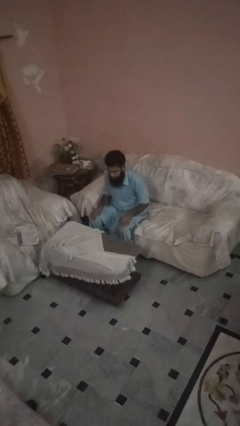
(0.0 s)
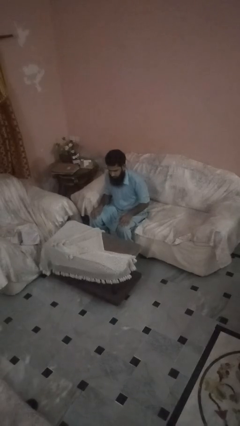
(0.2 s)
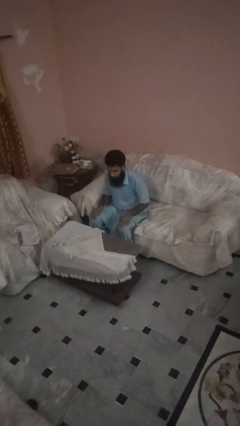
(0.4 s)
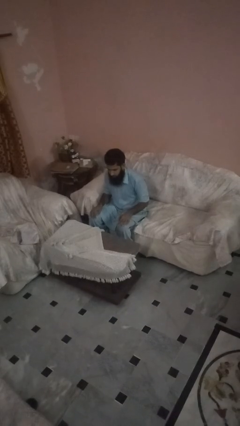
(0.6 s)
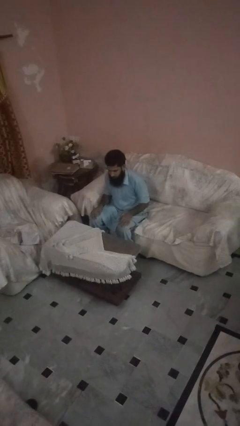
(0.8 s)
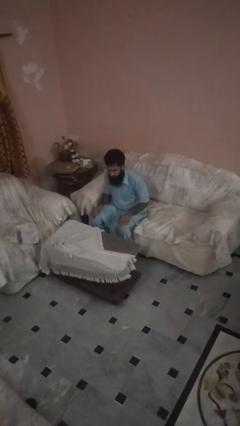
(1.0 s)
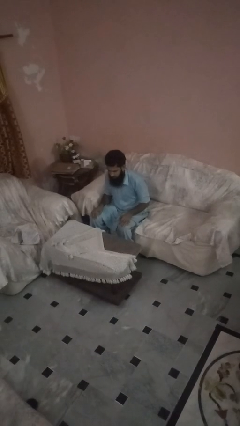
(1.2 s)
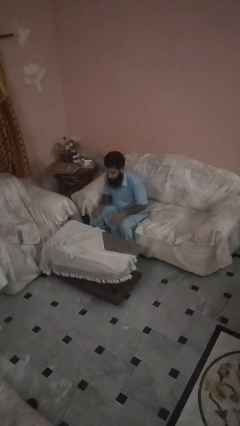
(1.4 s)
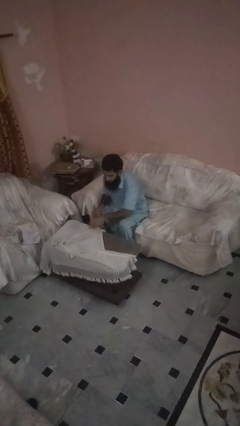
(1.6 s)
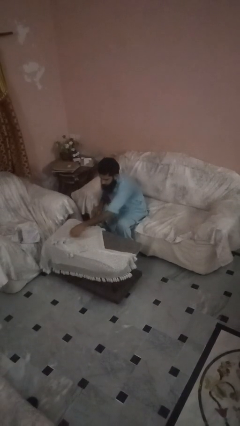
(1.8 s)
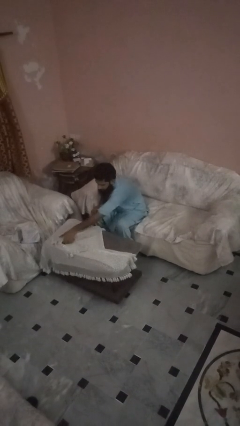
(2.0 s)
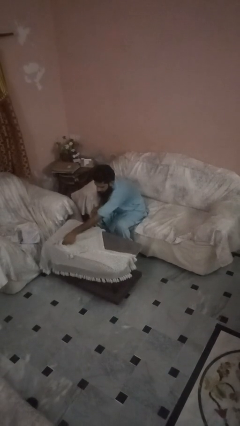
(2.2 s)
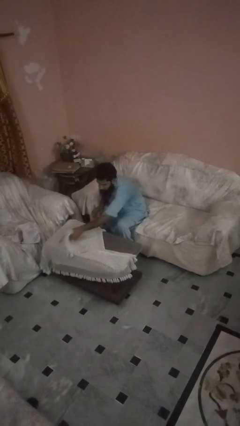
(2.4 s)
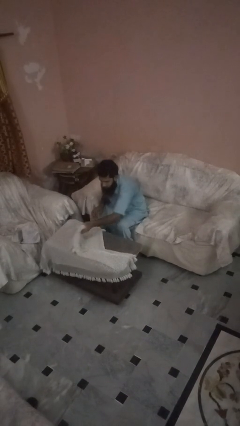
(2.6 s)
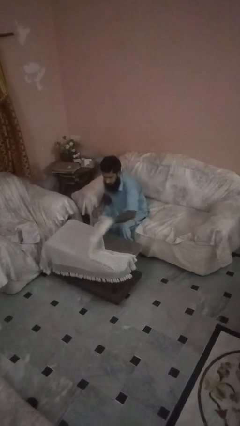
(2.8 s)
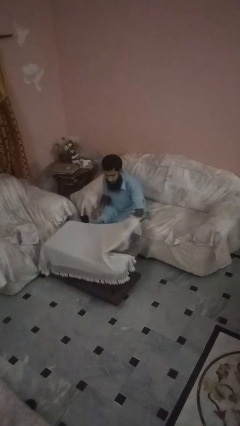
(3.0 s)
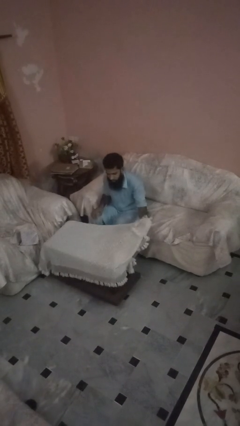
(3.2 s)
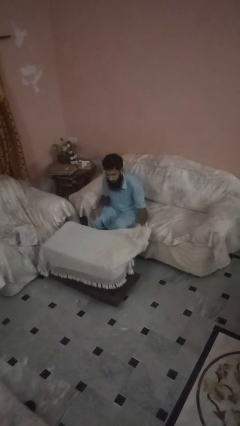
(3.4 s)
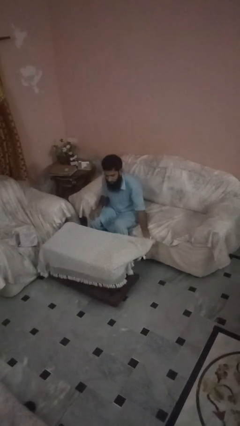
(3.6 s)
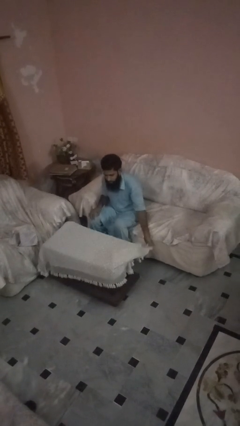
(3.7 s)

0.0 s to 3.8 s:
person spreads tablecloth

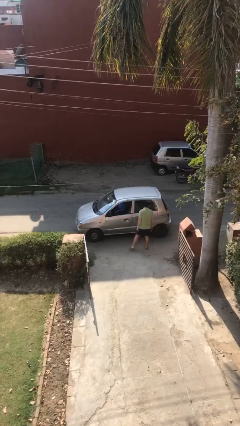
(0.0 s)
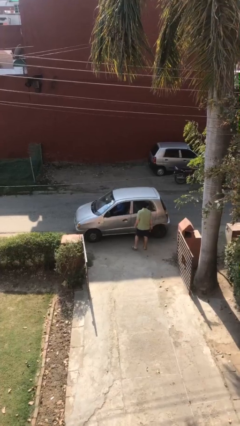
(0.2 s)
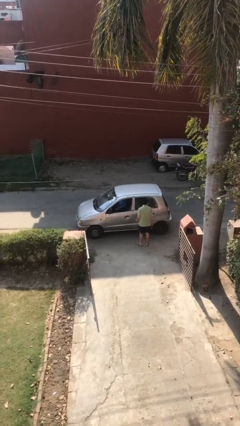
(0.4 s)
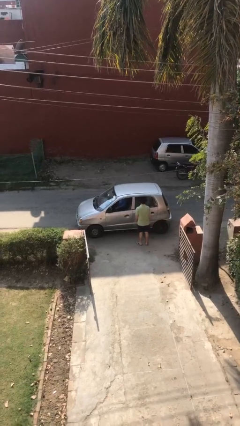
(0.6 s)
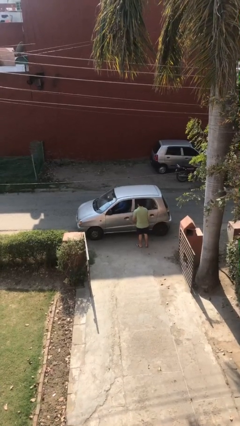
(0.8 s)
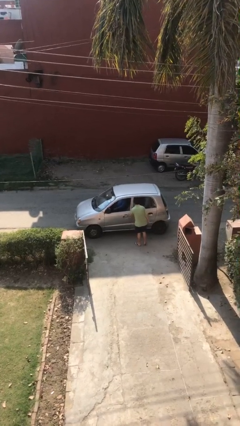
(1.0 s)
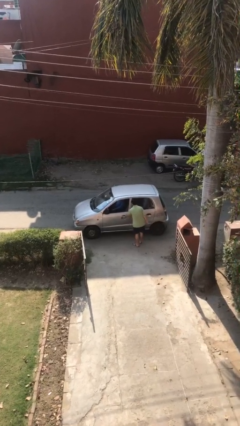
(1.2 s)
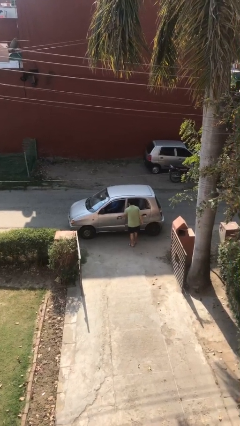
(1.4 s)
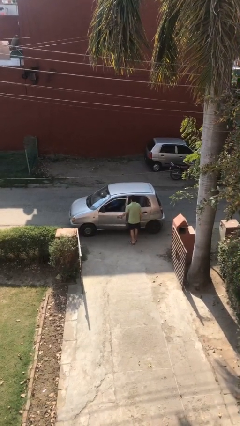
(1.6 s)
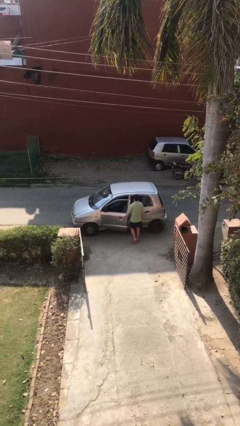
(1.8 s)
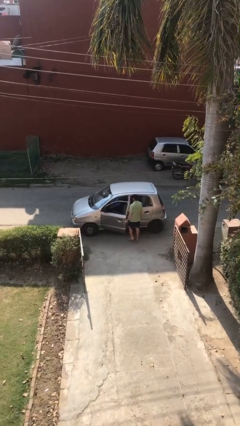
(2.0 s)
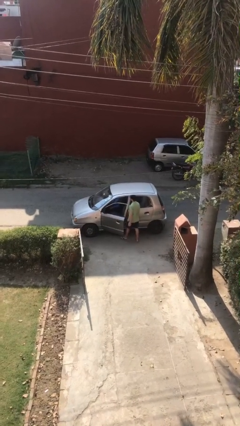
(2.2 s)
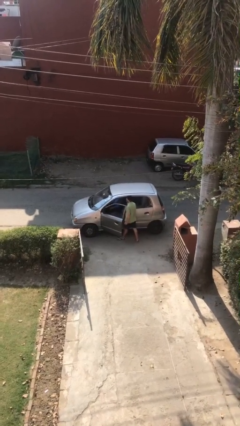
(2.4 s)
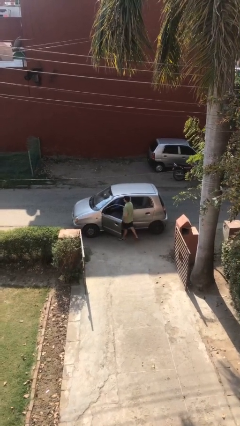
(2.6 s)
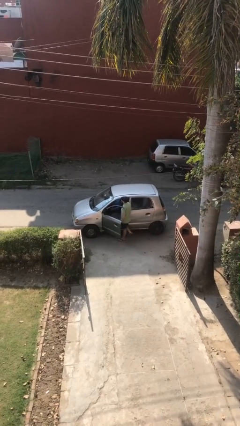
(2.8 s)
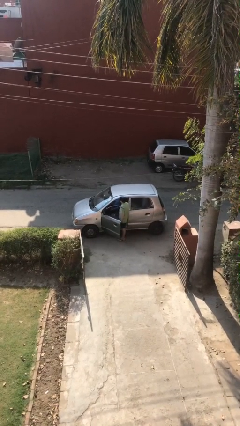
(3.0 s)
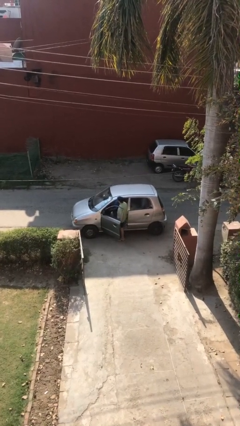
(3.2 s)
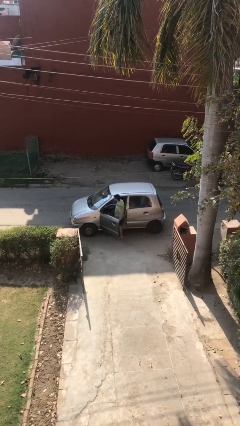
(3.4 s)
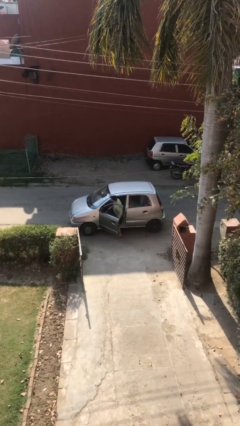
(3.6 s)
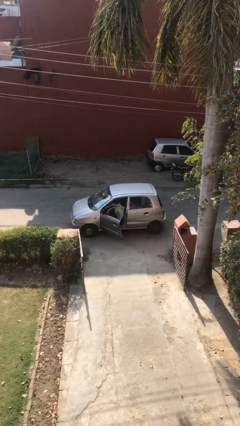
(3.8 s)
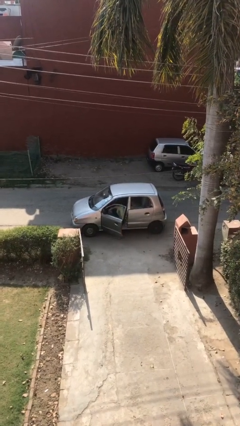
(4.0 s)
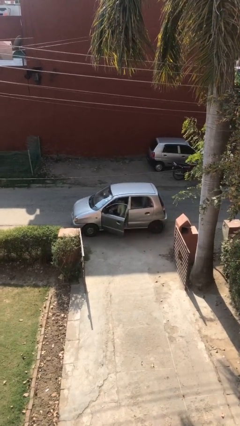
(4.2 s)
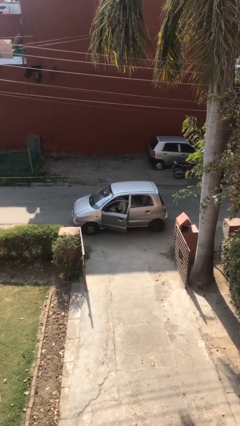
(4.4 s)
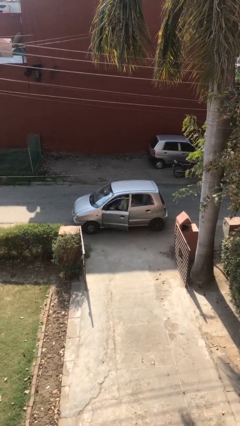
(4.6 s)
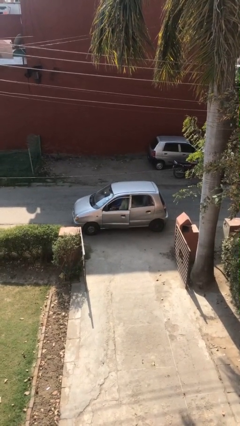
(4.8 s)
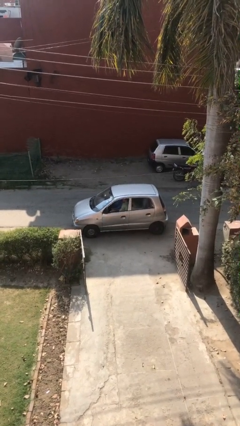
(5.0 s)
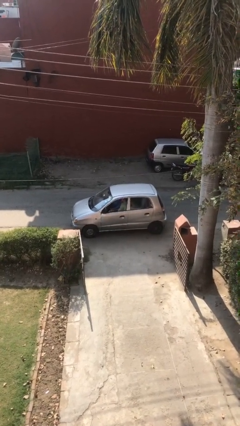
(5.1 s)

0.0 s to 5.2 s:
car picks up person

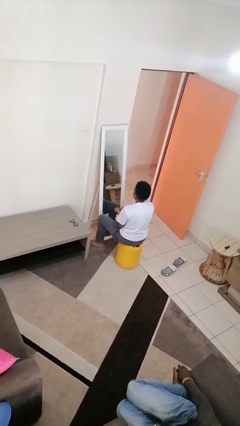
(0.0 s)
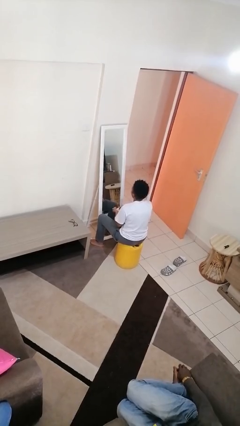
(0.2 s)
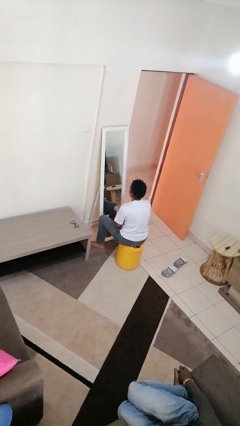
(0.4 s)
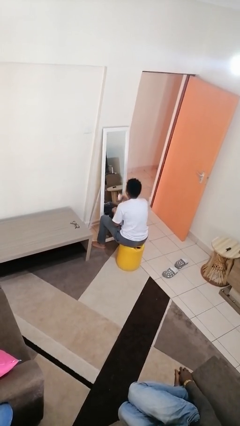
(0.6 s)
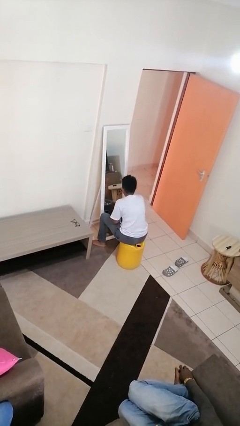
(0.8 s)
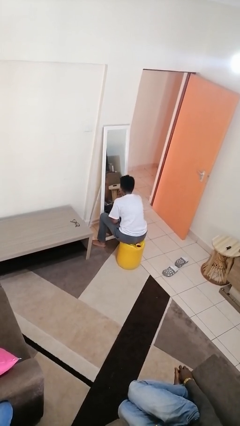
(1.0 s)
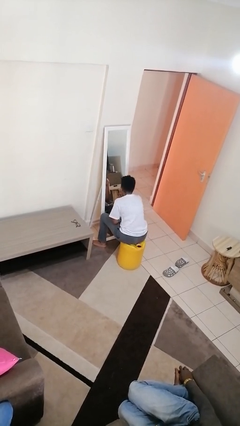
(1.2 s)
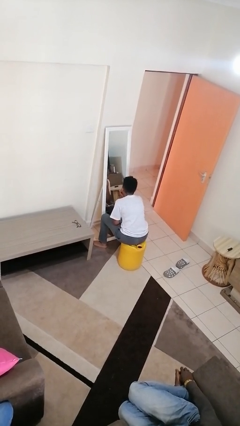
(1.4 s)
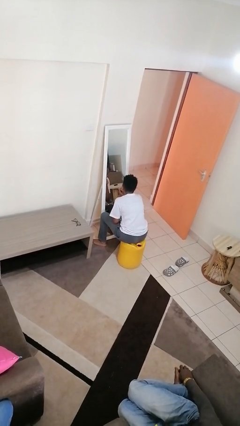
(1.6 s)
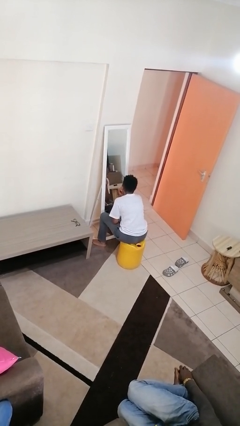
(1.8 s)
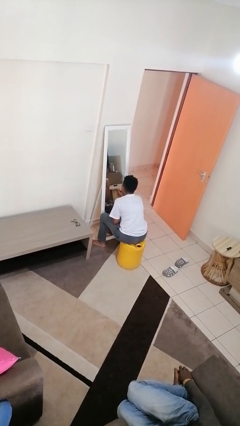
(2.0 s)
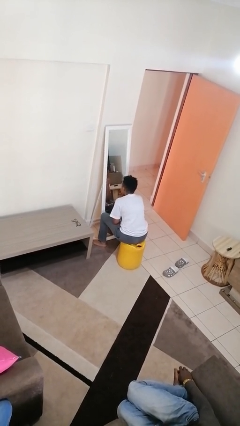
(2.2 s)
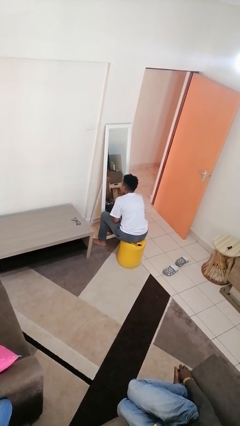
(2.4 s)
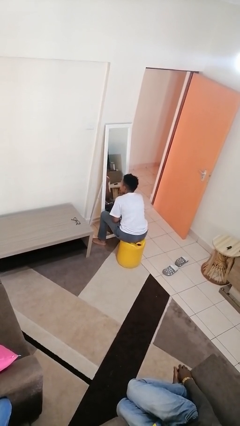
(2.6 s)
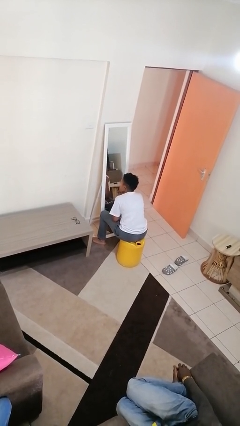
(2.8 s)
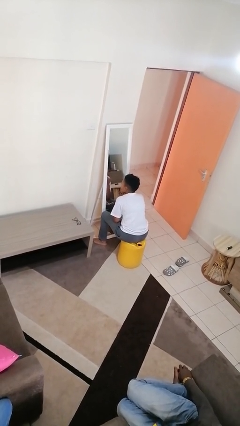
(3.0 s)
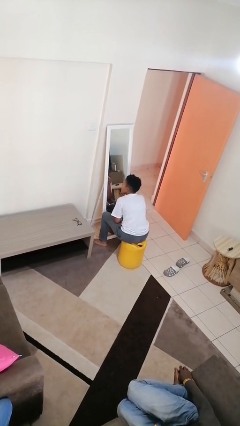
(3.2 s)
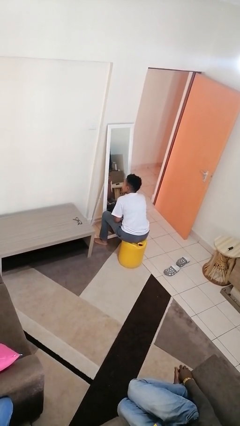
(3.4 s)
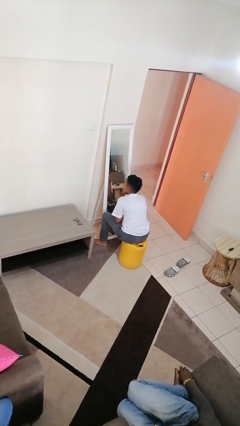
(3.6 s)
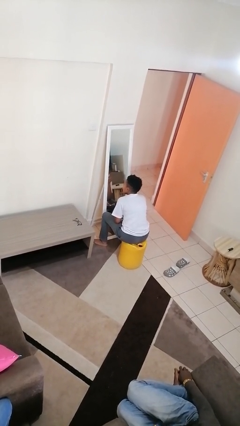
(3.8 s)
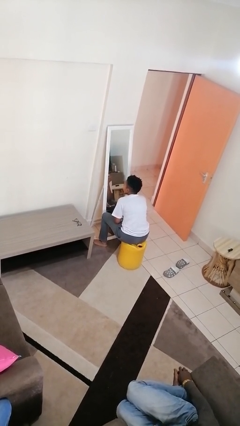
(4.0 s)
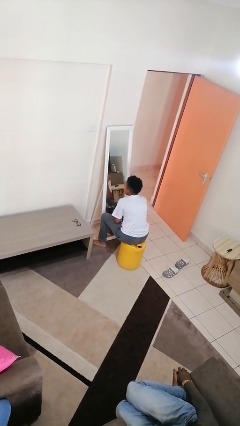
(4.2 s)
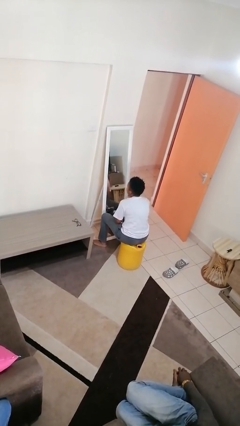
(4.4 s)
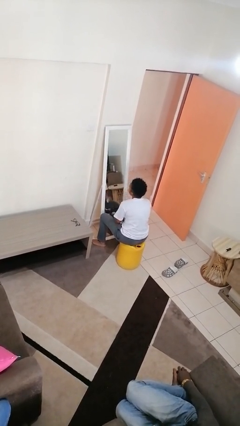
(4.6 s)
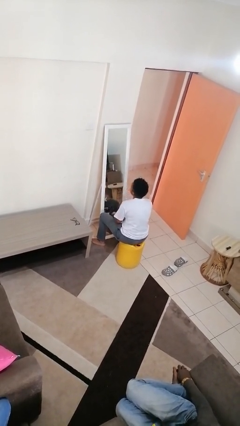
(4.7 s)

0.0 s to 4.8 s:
person applies foundation makeup

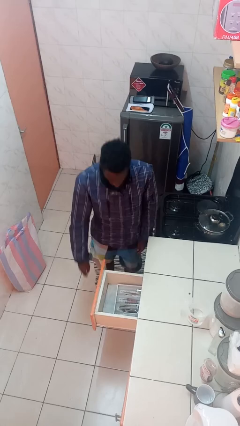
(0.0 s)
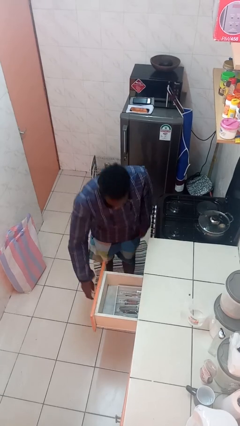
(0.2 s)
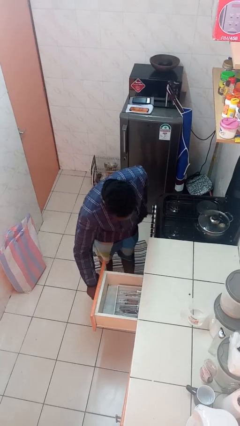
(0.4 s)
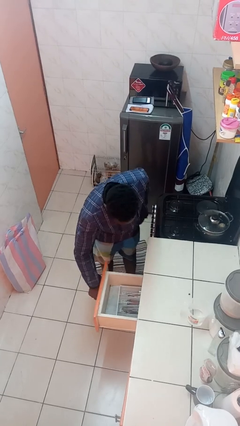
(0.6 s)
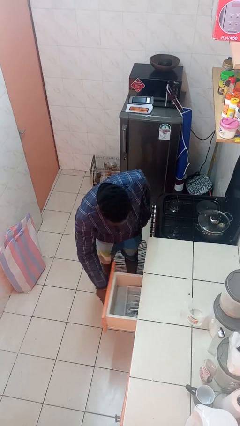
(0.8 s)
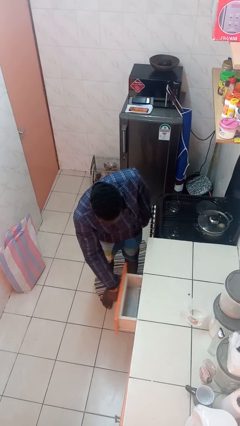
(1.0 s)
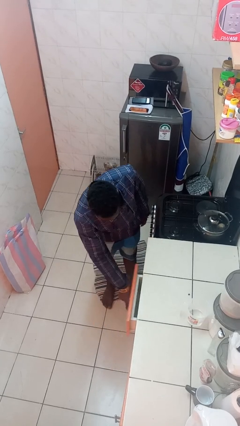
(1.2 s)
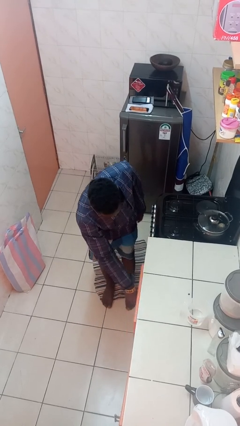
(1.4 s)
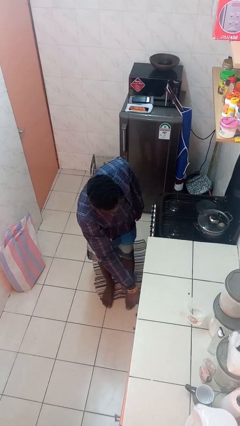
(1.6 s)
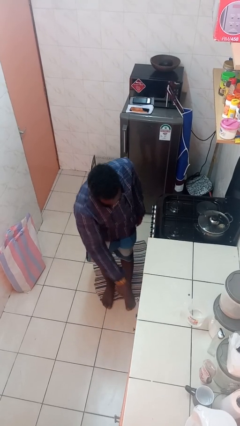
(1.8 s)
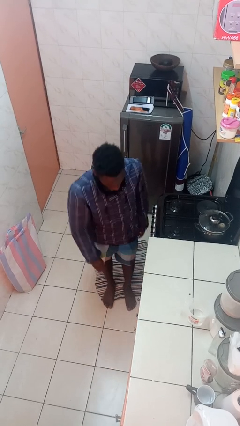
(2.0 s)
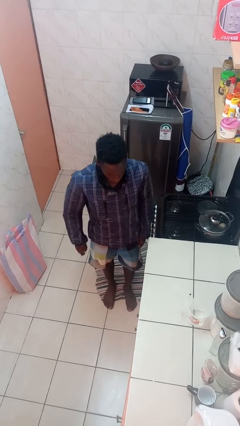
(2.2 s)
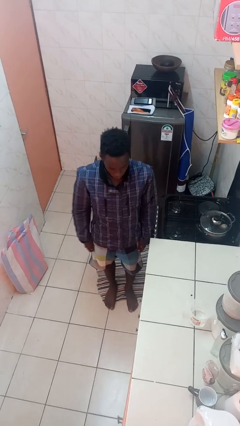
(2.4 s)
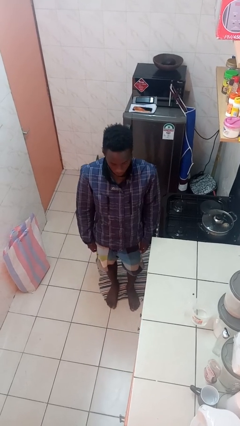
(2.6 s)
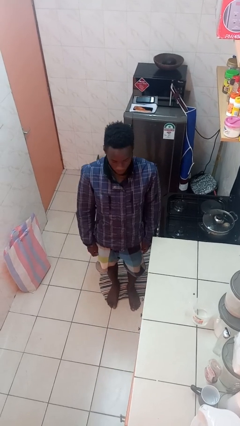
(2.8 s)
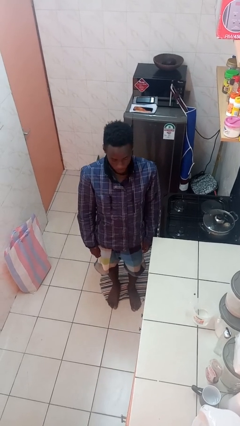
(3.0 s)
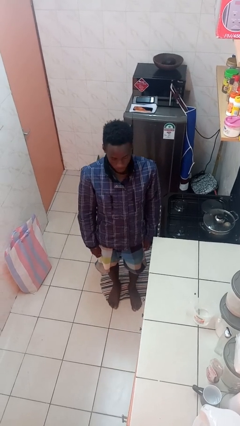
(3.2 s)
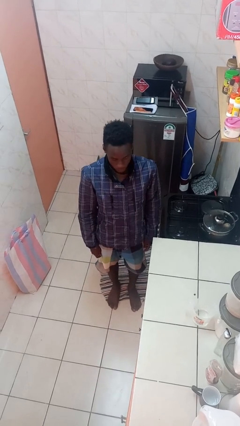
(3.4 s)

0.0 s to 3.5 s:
person closes kitchen drawer

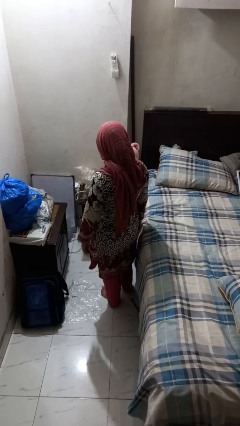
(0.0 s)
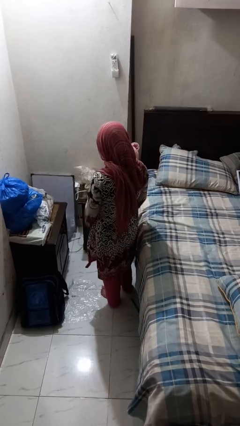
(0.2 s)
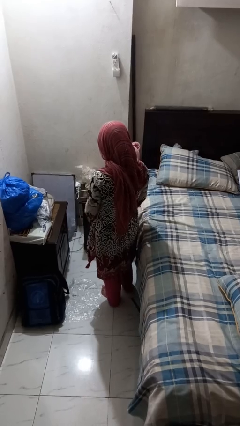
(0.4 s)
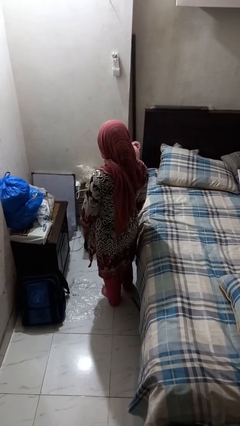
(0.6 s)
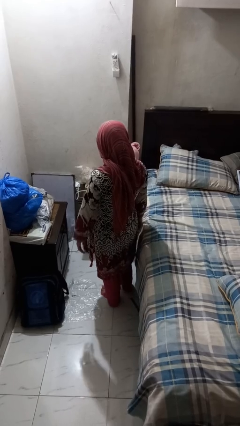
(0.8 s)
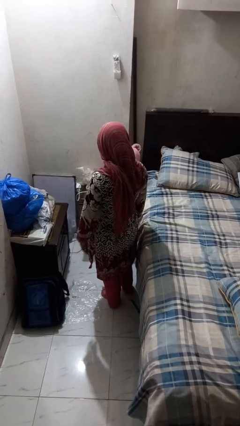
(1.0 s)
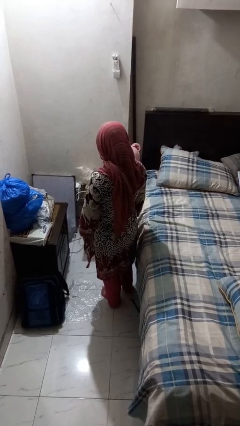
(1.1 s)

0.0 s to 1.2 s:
person swats bug
